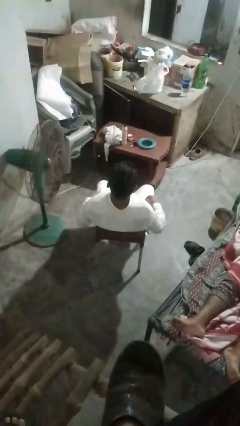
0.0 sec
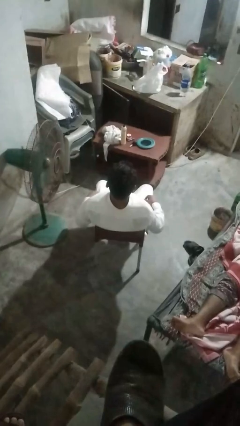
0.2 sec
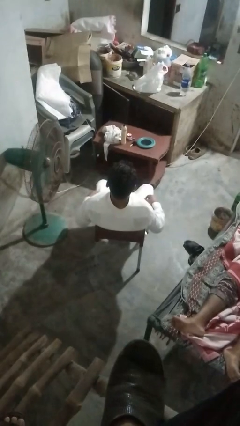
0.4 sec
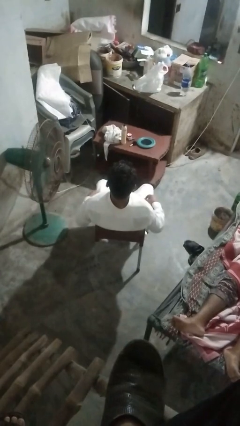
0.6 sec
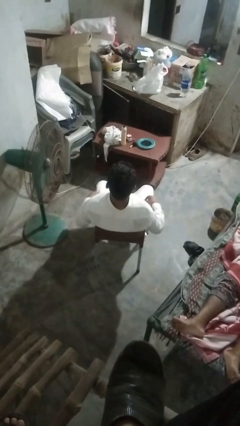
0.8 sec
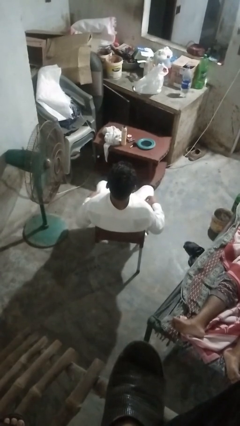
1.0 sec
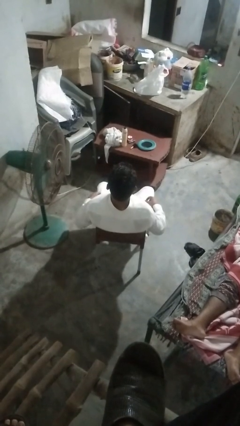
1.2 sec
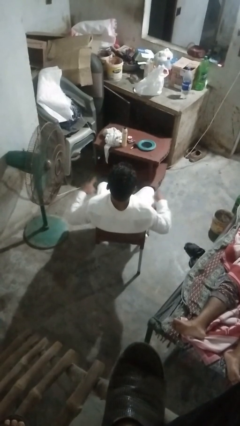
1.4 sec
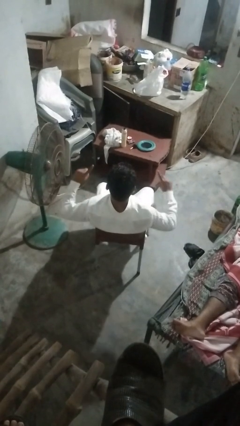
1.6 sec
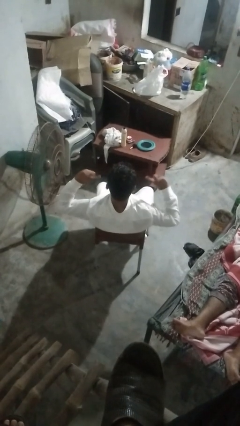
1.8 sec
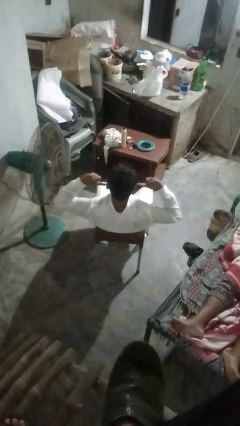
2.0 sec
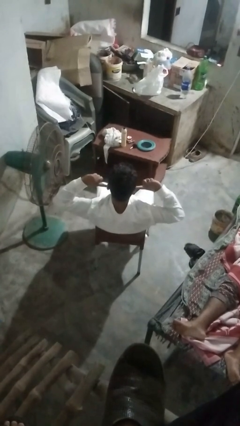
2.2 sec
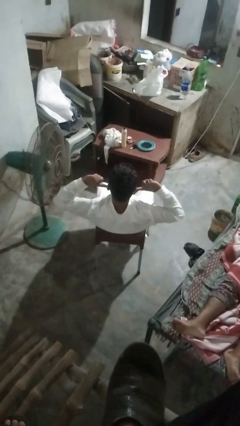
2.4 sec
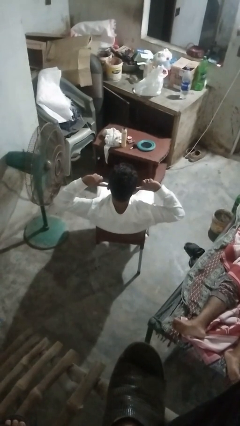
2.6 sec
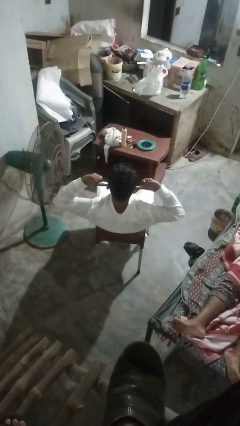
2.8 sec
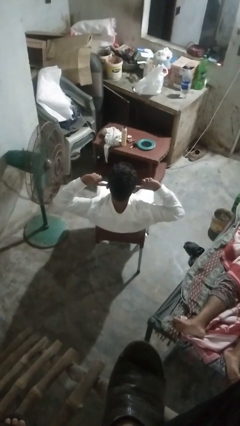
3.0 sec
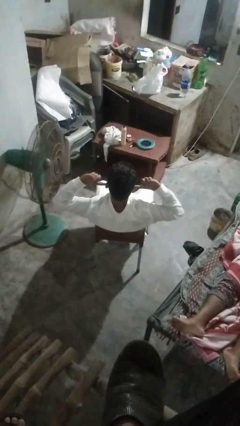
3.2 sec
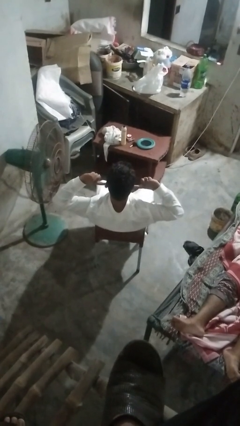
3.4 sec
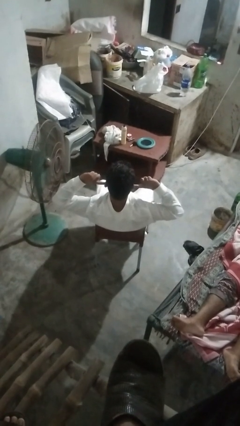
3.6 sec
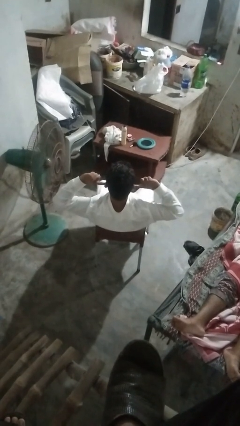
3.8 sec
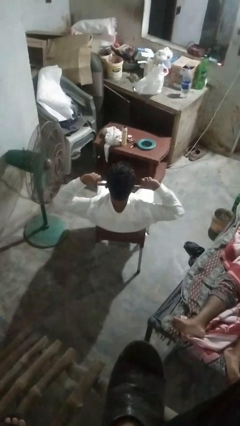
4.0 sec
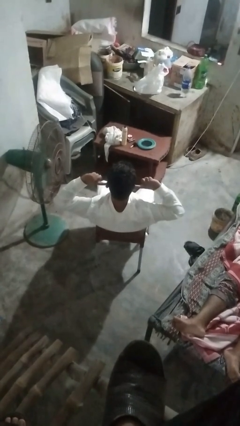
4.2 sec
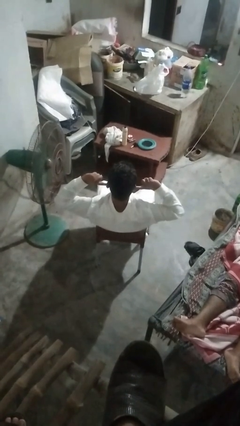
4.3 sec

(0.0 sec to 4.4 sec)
person puts fingers in ear

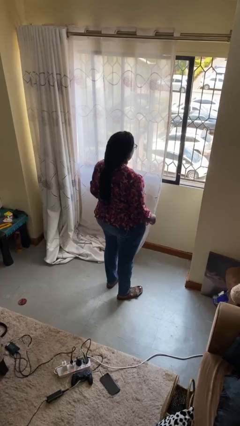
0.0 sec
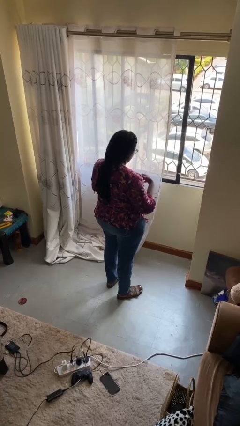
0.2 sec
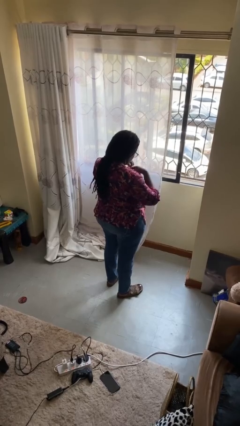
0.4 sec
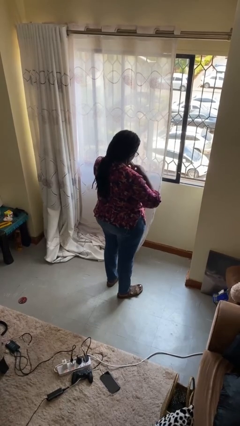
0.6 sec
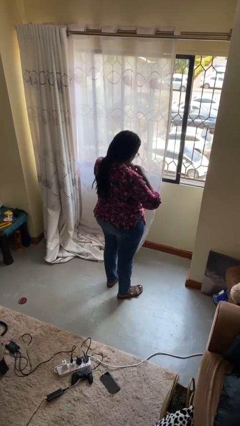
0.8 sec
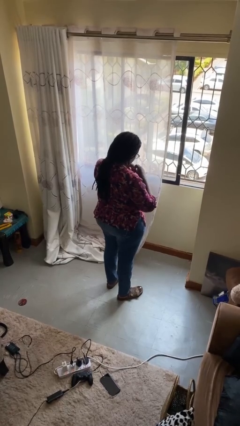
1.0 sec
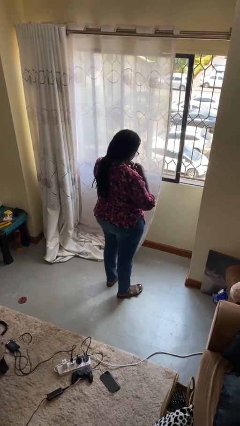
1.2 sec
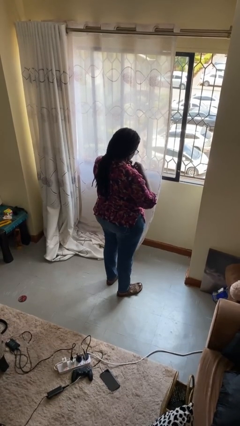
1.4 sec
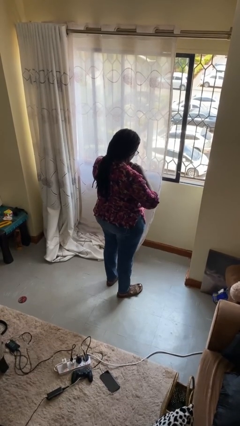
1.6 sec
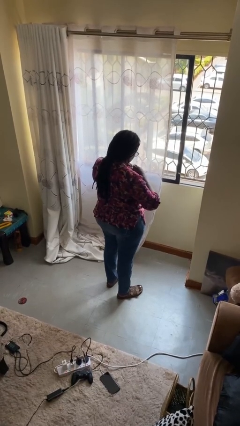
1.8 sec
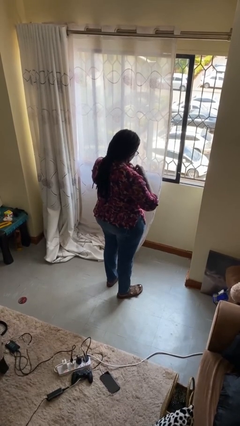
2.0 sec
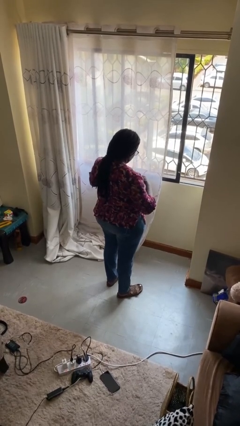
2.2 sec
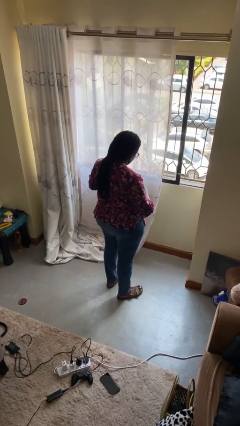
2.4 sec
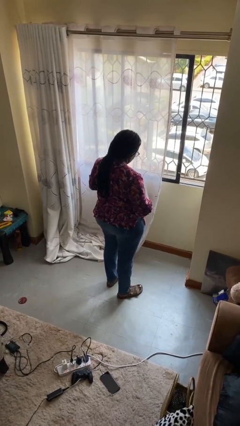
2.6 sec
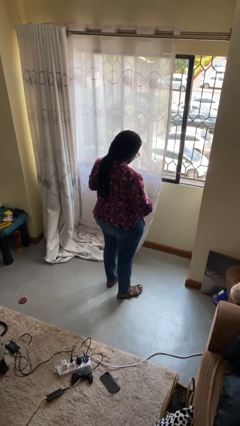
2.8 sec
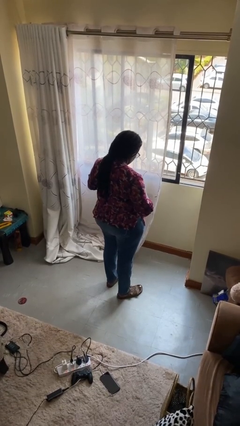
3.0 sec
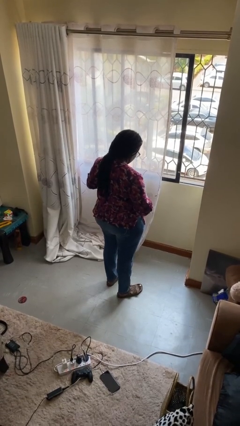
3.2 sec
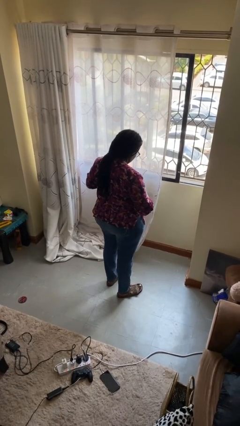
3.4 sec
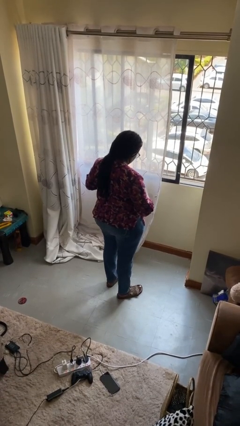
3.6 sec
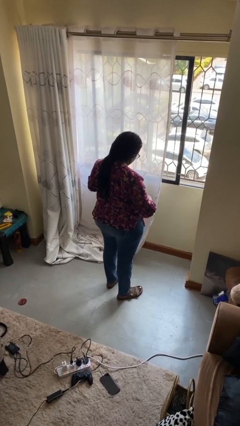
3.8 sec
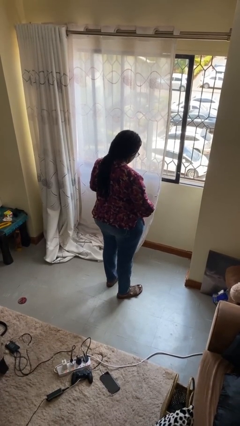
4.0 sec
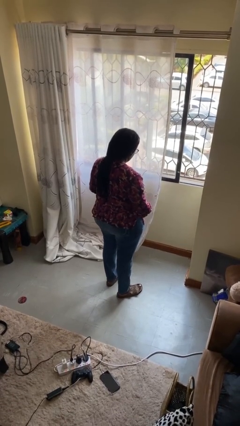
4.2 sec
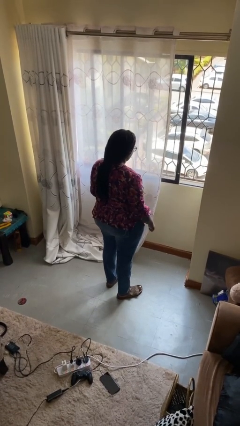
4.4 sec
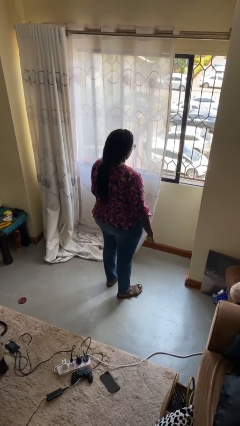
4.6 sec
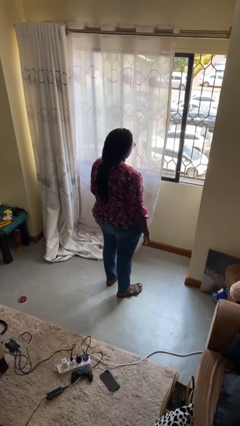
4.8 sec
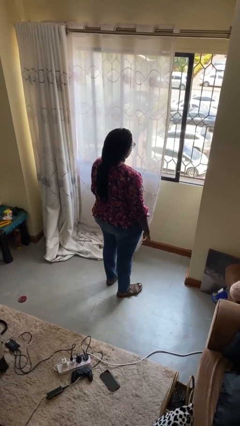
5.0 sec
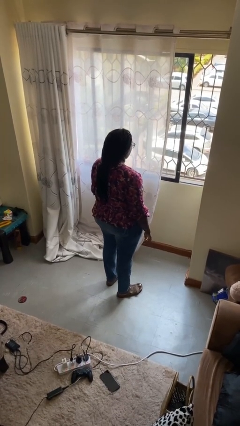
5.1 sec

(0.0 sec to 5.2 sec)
person unbuttons shirt

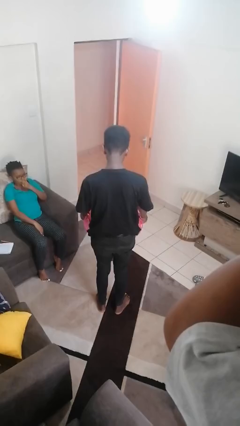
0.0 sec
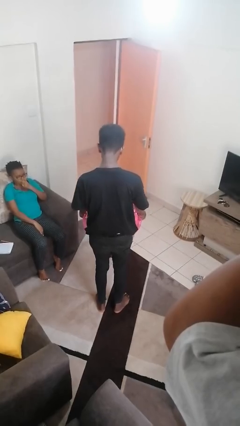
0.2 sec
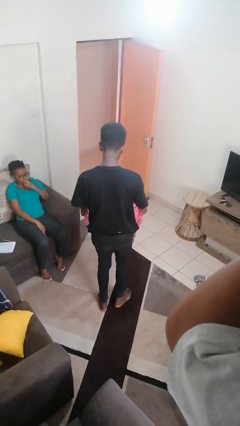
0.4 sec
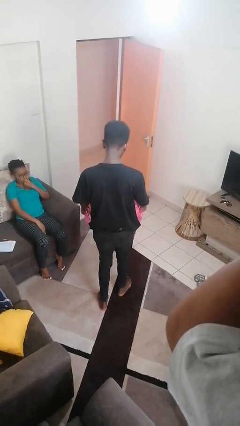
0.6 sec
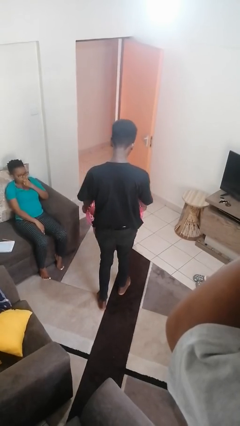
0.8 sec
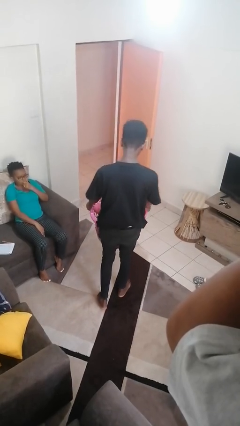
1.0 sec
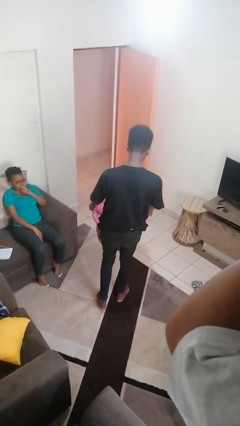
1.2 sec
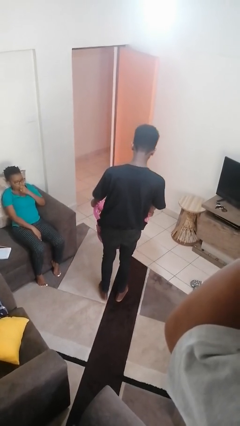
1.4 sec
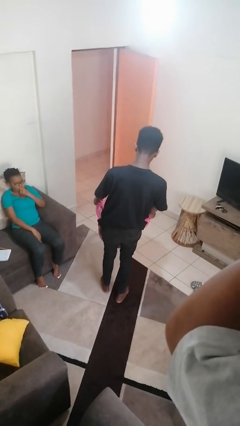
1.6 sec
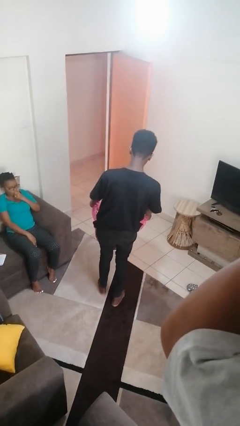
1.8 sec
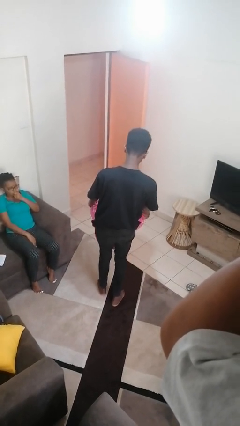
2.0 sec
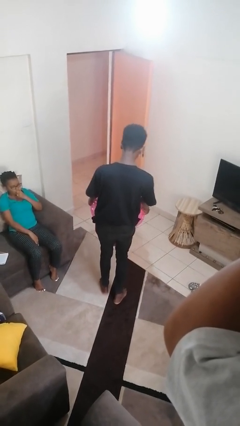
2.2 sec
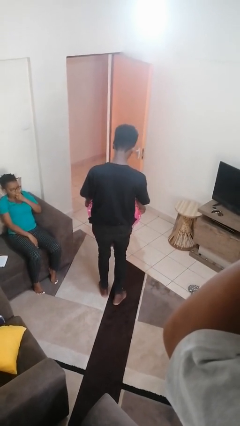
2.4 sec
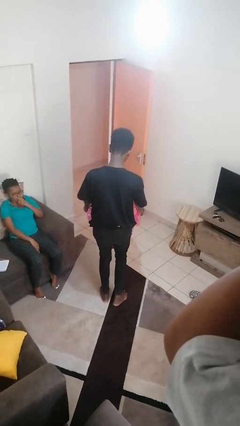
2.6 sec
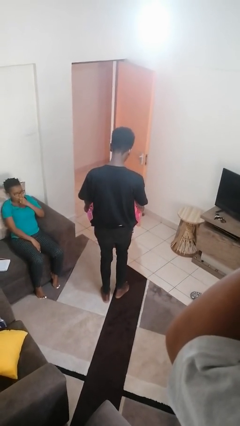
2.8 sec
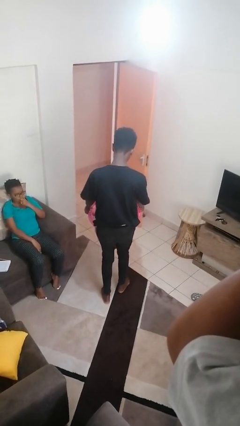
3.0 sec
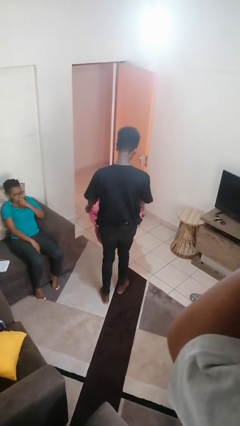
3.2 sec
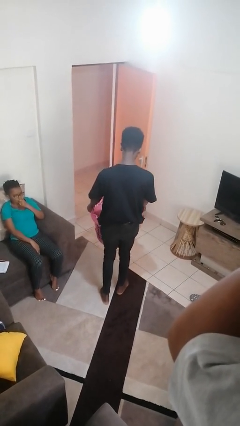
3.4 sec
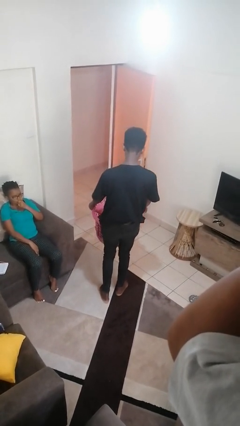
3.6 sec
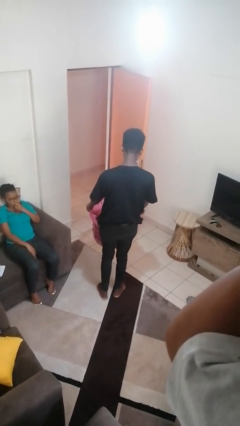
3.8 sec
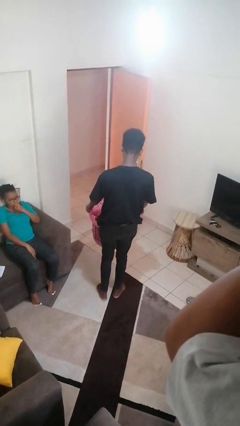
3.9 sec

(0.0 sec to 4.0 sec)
person carries laundry basket

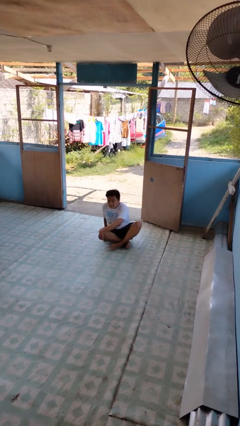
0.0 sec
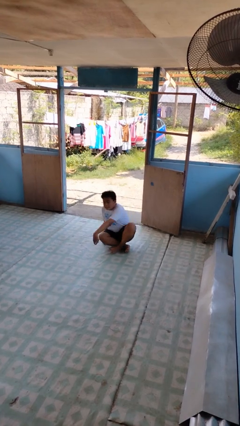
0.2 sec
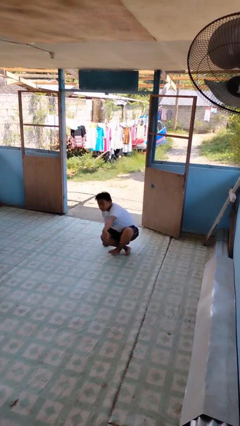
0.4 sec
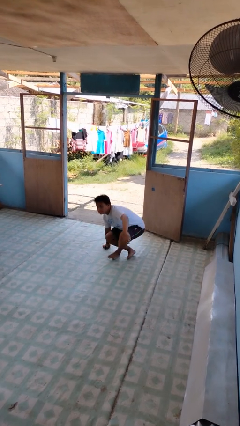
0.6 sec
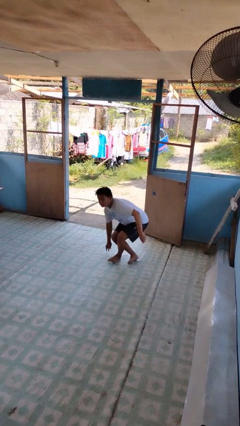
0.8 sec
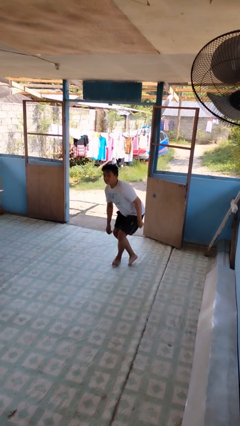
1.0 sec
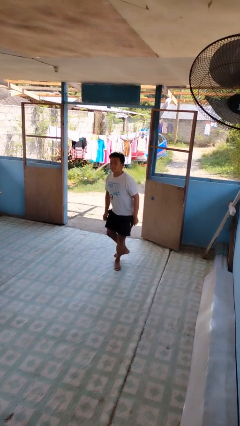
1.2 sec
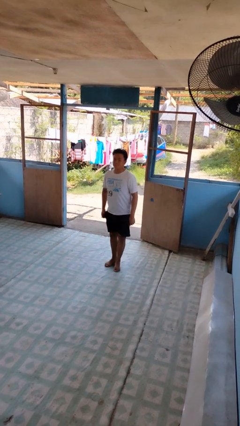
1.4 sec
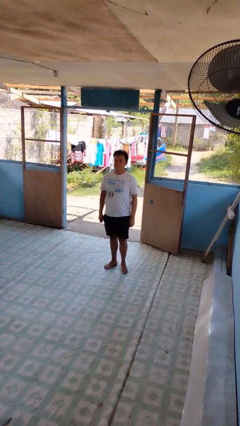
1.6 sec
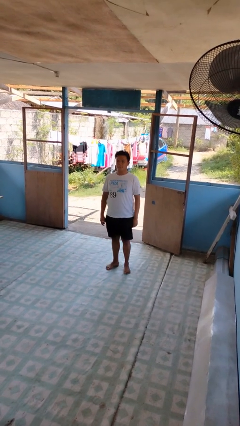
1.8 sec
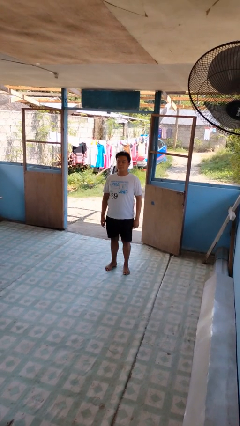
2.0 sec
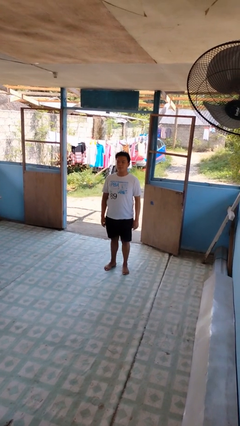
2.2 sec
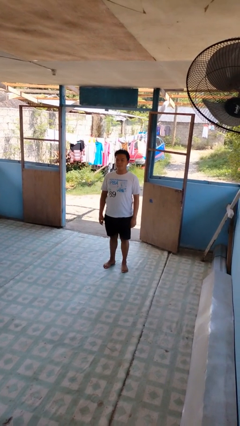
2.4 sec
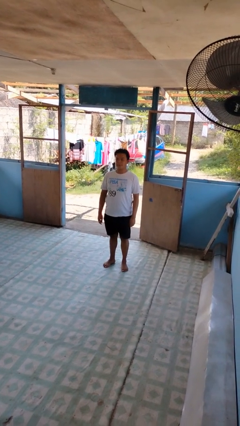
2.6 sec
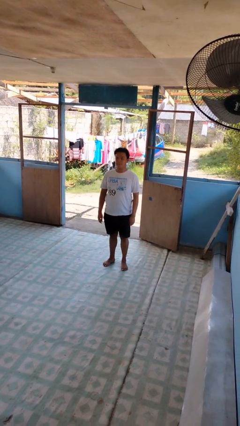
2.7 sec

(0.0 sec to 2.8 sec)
person stands up from floor

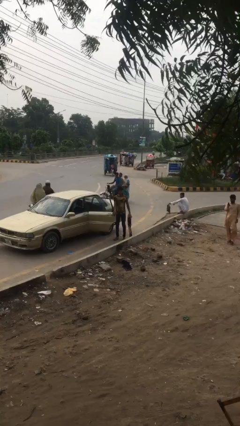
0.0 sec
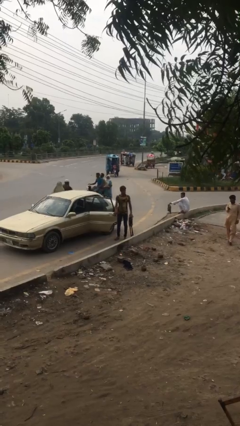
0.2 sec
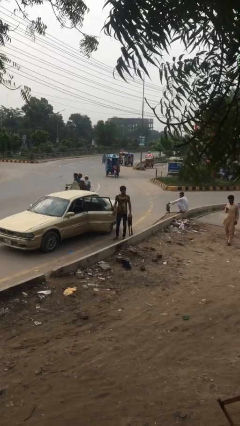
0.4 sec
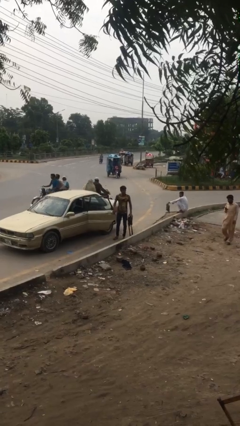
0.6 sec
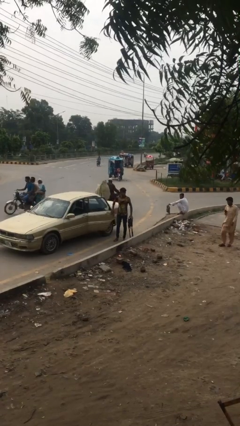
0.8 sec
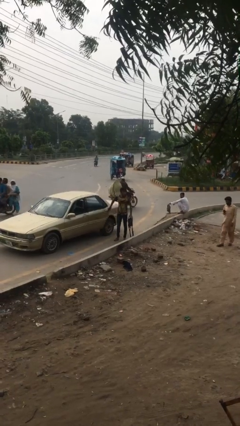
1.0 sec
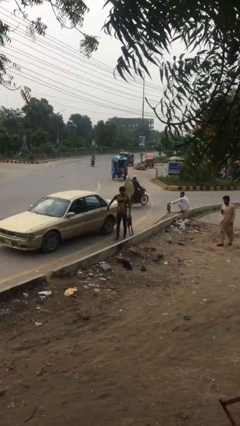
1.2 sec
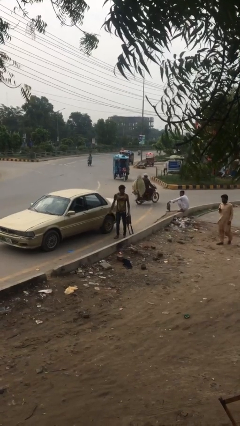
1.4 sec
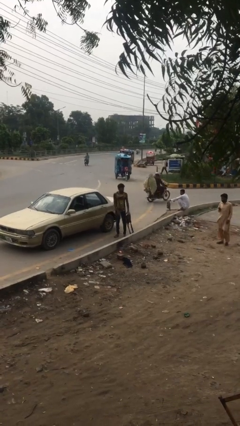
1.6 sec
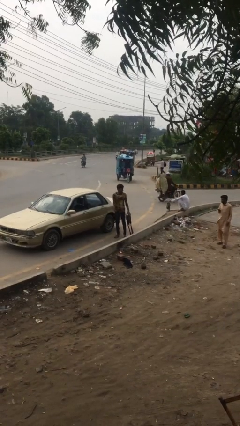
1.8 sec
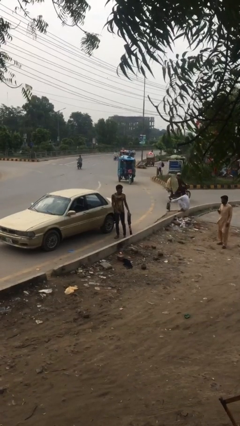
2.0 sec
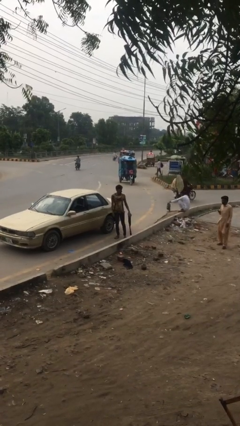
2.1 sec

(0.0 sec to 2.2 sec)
person closes car door
